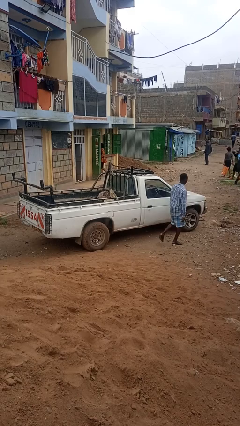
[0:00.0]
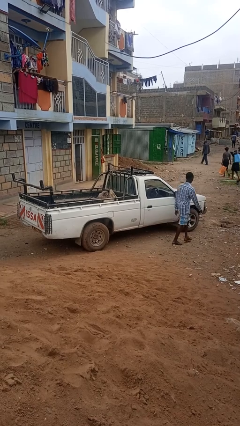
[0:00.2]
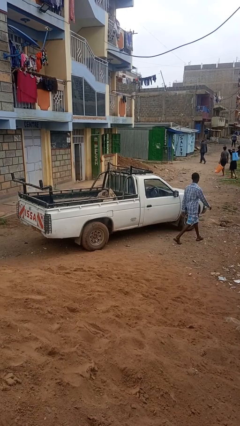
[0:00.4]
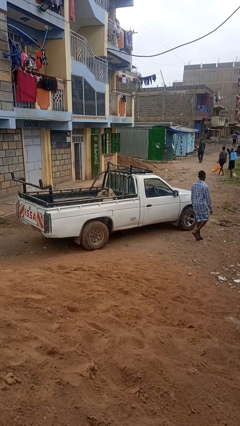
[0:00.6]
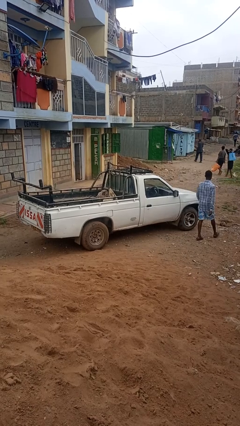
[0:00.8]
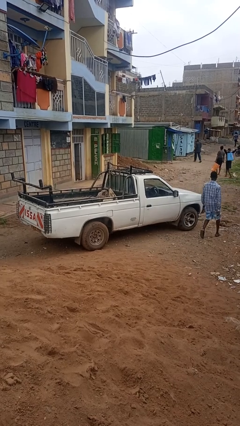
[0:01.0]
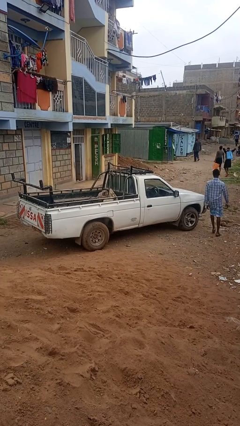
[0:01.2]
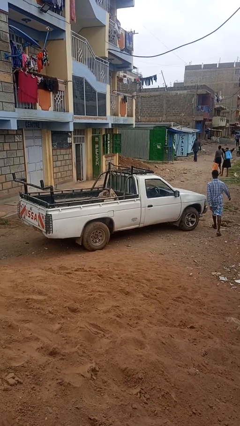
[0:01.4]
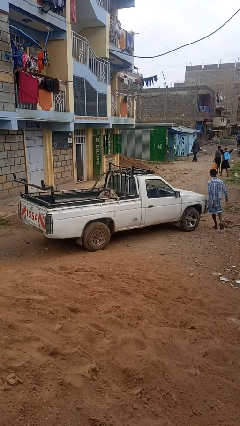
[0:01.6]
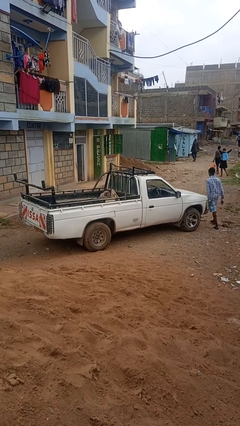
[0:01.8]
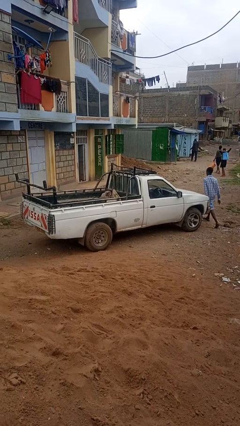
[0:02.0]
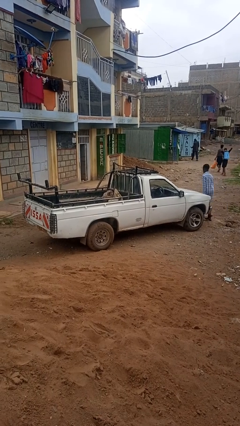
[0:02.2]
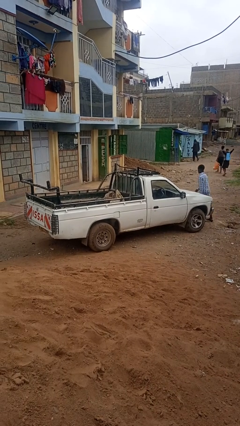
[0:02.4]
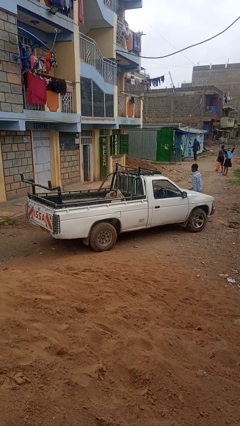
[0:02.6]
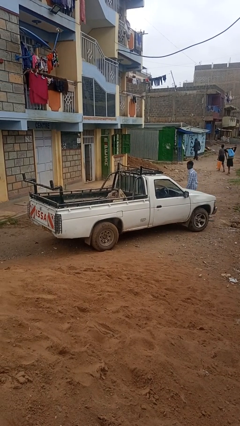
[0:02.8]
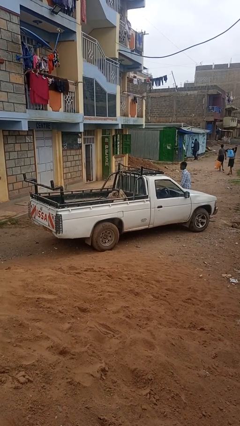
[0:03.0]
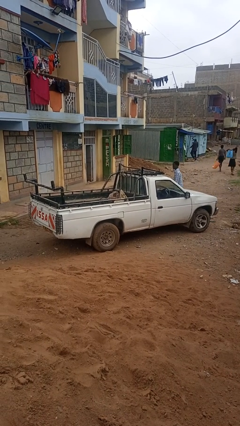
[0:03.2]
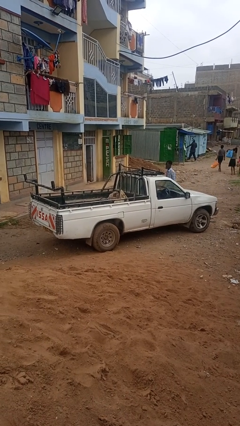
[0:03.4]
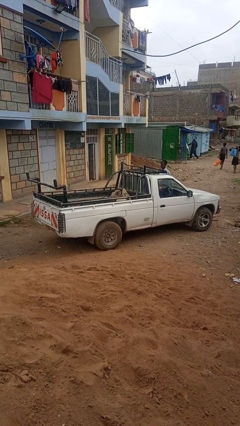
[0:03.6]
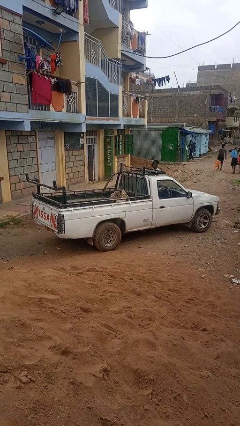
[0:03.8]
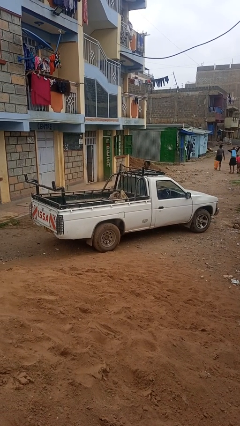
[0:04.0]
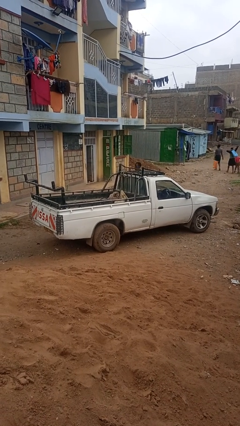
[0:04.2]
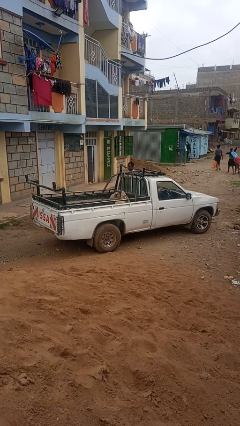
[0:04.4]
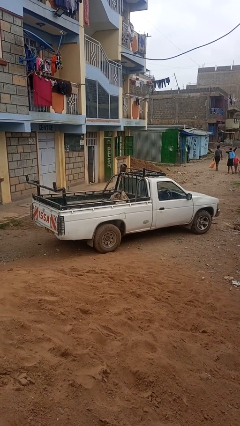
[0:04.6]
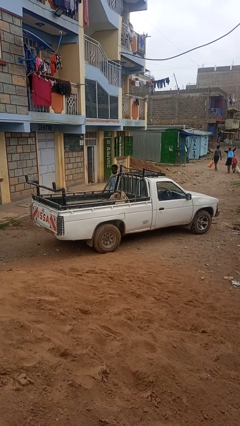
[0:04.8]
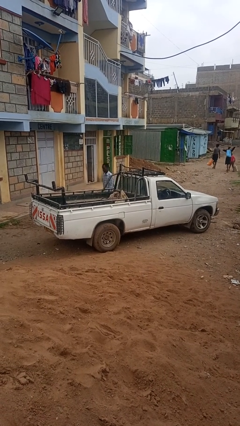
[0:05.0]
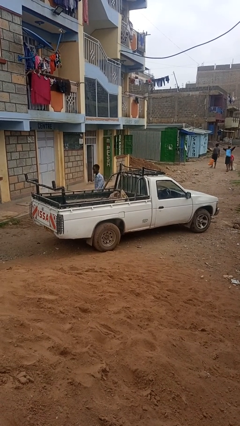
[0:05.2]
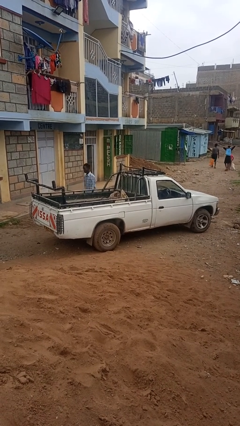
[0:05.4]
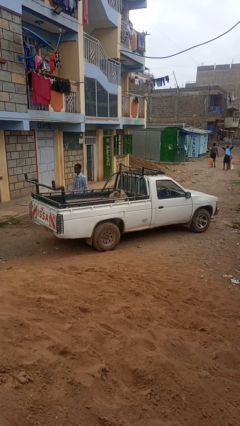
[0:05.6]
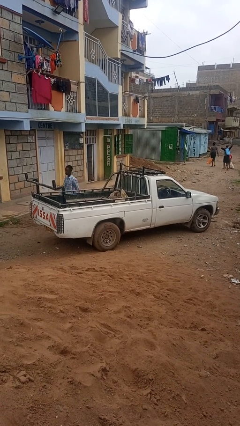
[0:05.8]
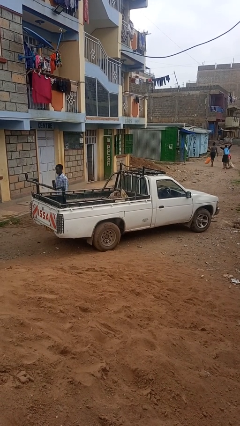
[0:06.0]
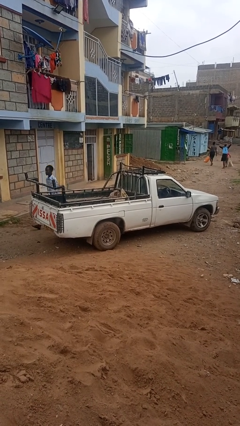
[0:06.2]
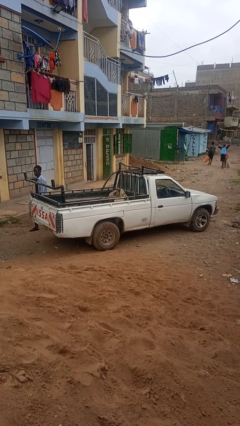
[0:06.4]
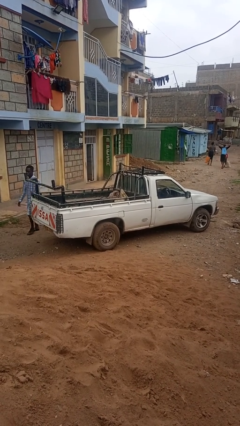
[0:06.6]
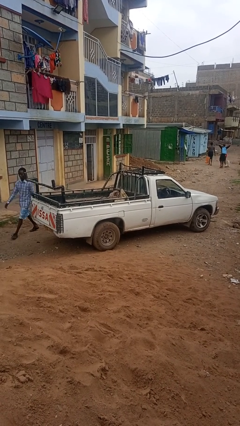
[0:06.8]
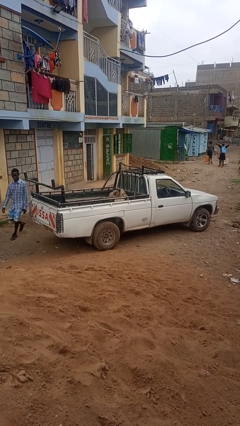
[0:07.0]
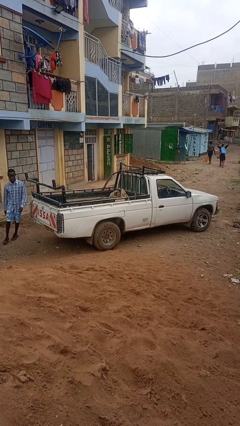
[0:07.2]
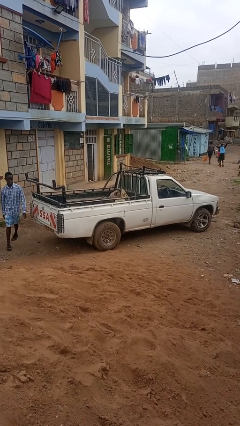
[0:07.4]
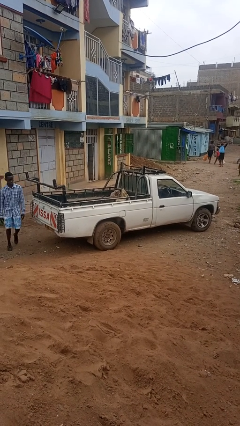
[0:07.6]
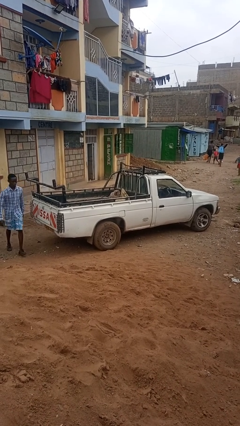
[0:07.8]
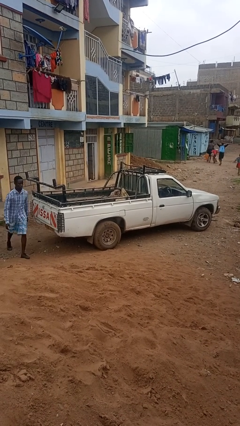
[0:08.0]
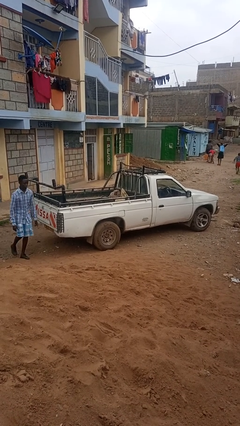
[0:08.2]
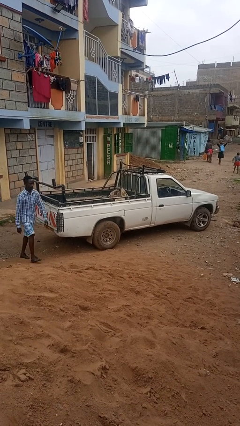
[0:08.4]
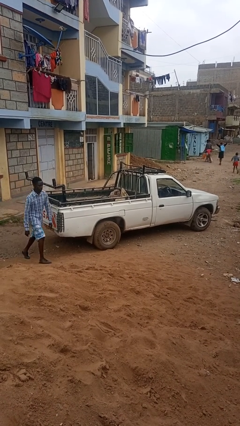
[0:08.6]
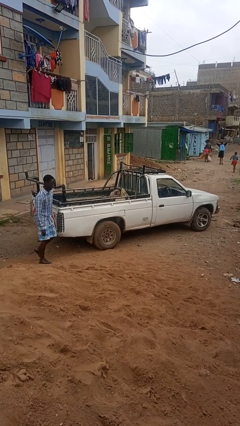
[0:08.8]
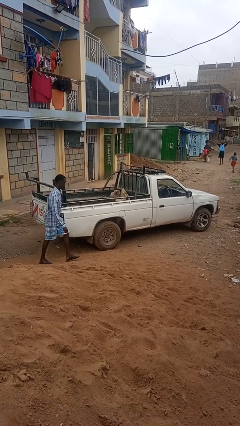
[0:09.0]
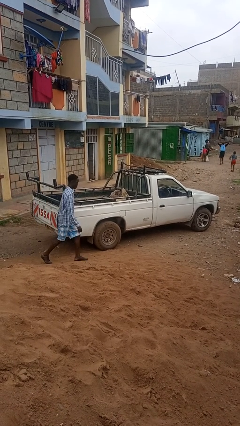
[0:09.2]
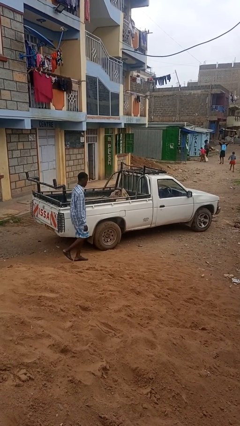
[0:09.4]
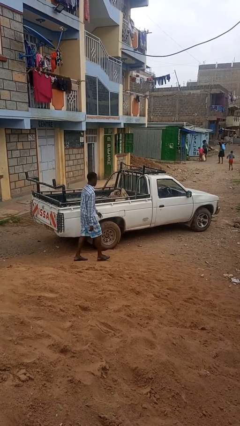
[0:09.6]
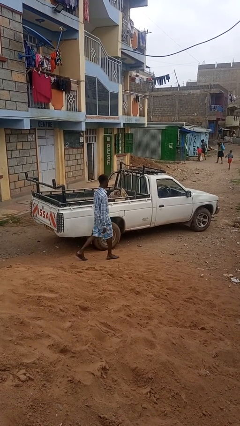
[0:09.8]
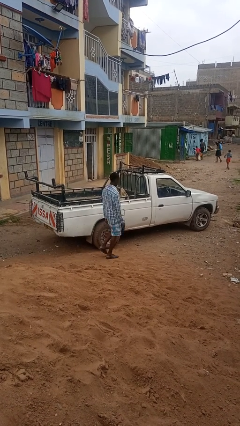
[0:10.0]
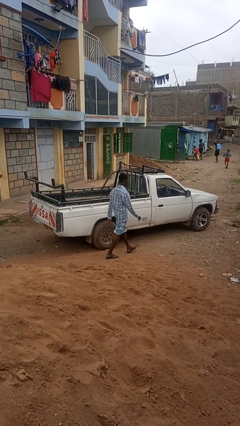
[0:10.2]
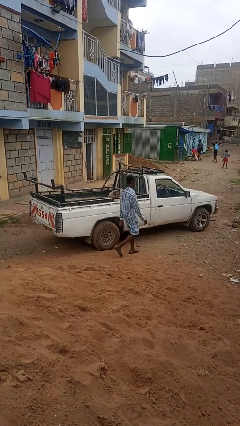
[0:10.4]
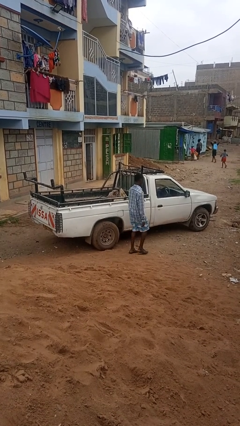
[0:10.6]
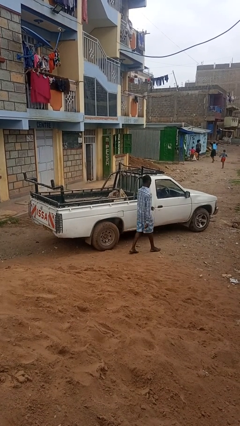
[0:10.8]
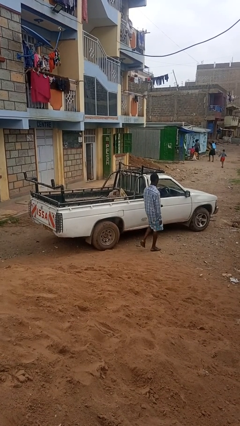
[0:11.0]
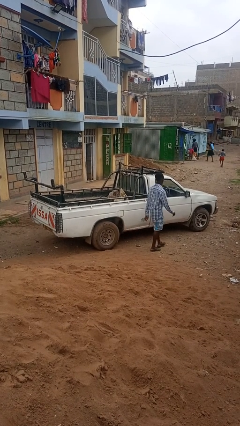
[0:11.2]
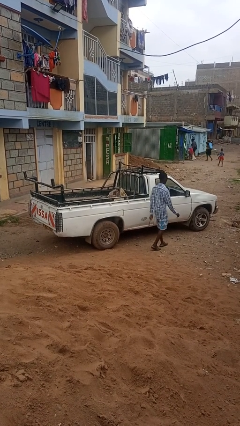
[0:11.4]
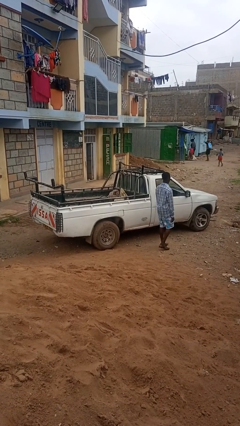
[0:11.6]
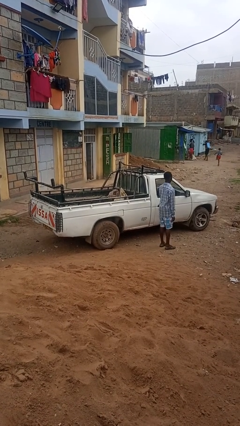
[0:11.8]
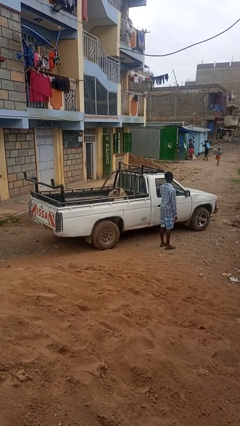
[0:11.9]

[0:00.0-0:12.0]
person walks around car

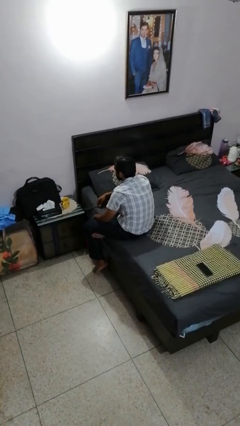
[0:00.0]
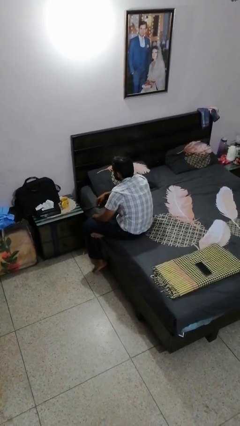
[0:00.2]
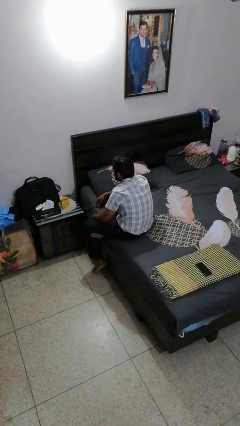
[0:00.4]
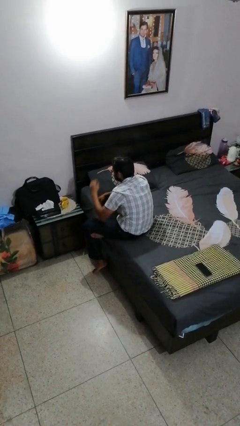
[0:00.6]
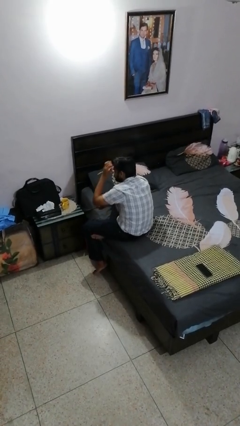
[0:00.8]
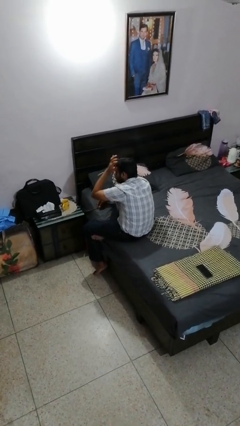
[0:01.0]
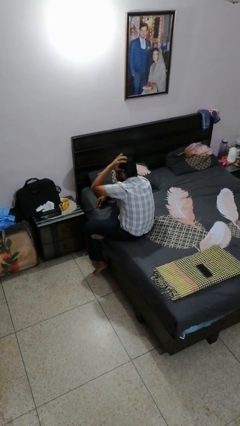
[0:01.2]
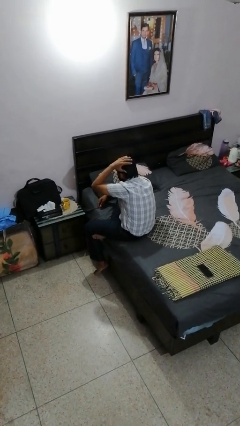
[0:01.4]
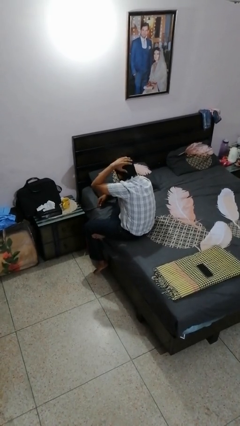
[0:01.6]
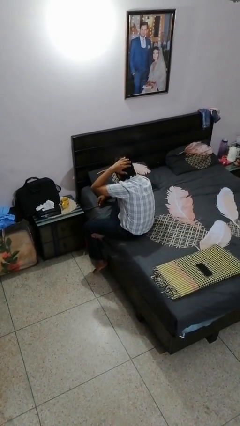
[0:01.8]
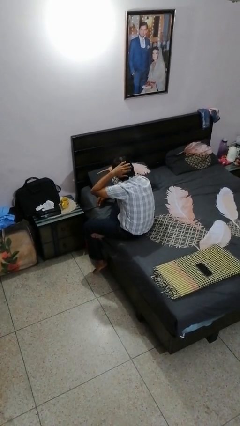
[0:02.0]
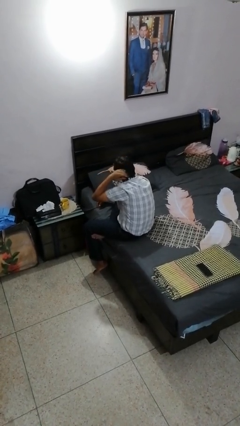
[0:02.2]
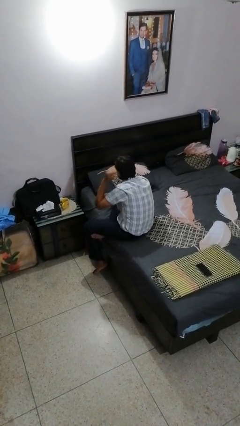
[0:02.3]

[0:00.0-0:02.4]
person strokes hair

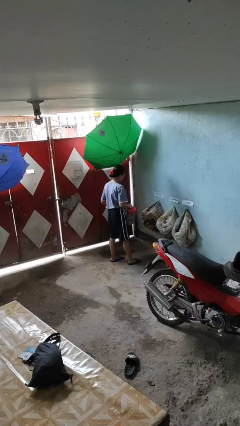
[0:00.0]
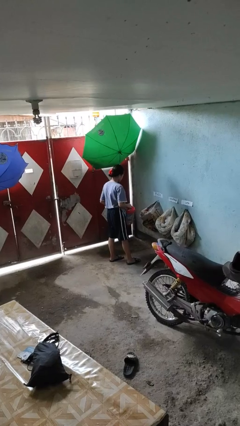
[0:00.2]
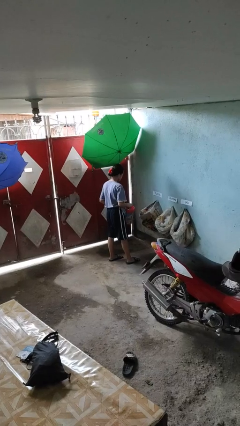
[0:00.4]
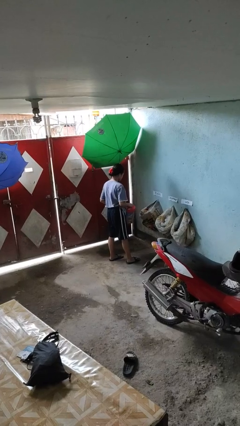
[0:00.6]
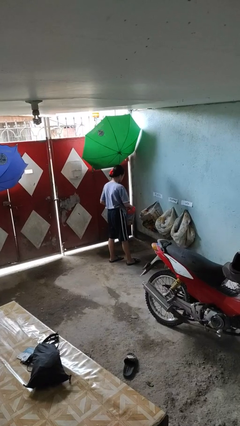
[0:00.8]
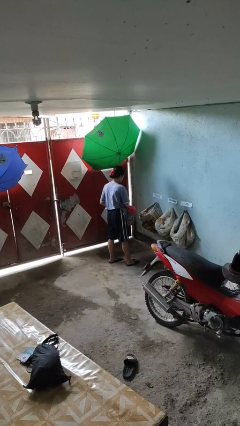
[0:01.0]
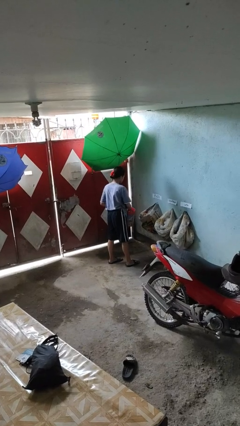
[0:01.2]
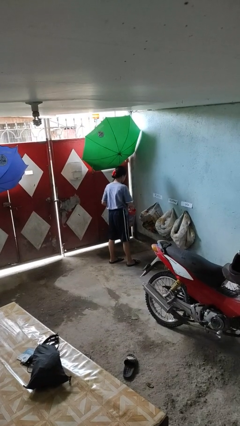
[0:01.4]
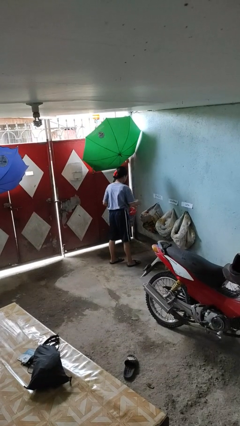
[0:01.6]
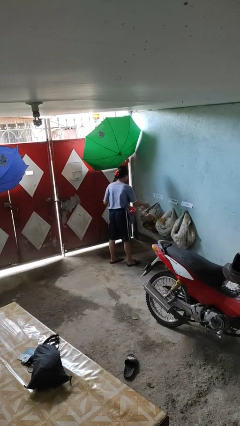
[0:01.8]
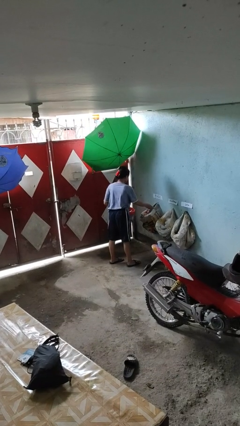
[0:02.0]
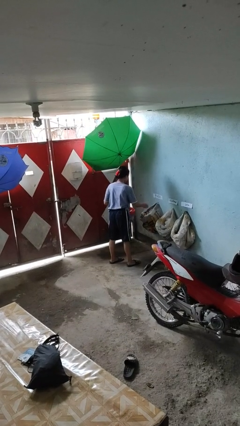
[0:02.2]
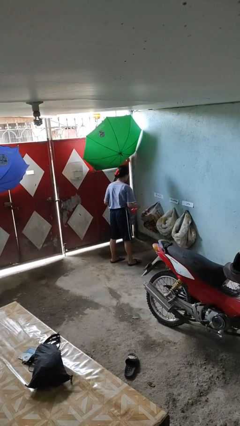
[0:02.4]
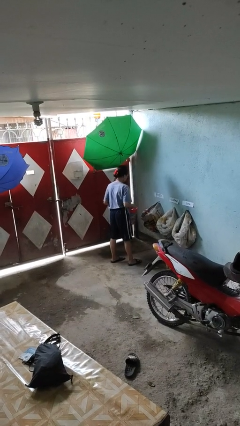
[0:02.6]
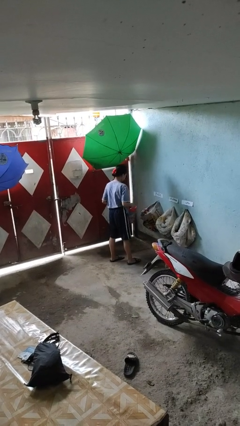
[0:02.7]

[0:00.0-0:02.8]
person discards trash

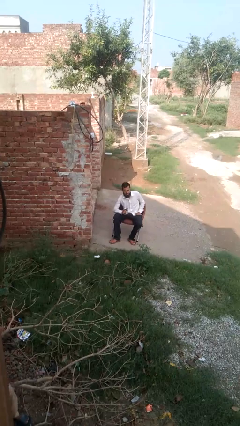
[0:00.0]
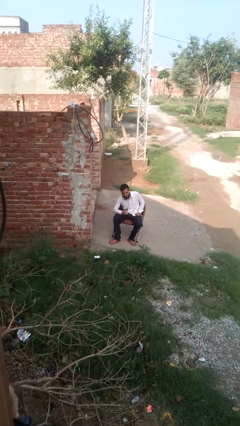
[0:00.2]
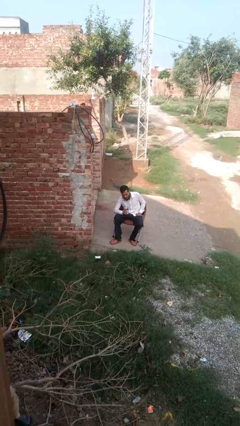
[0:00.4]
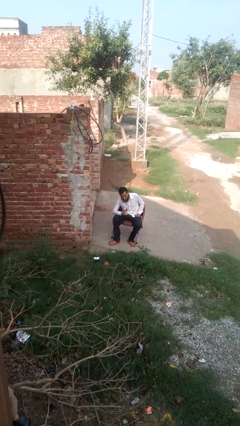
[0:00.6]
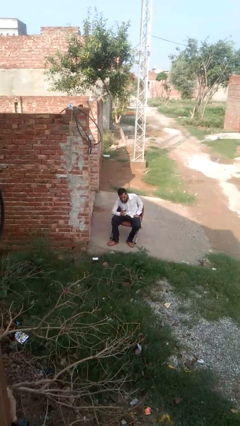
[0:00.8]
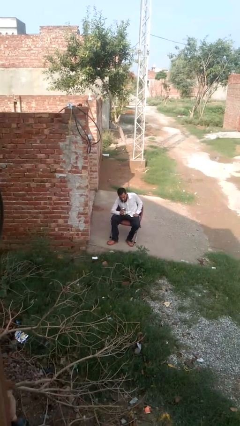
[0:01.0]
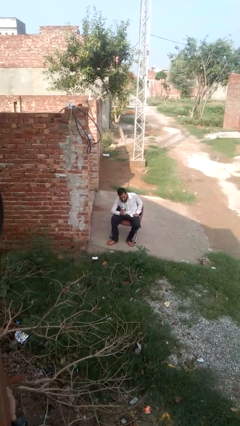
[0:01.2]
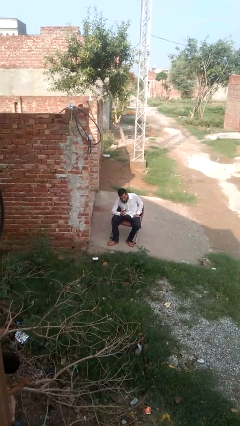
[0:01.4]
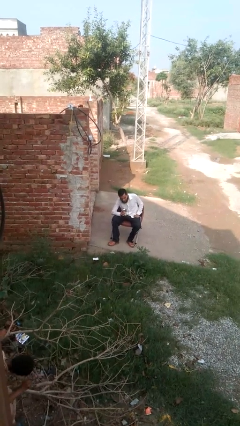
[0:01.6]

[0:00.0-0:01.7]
person drinks from straw
